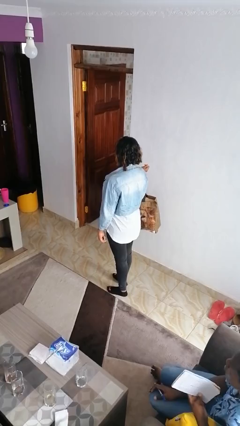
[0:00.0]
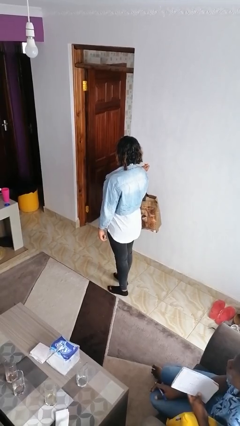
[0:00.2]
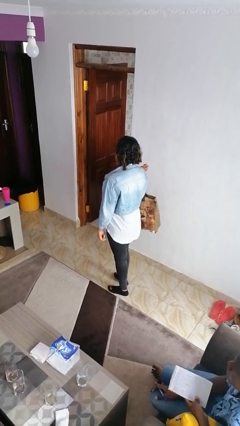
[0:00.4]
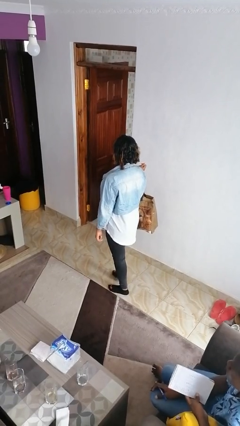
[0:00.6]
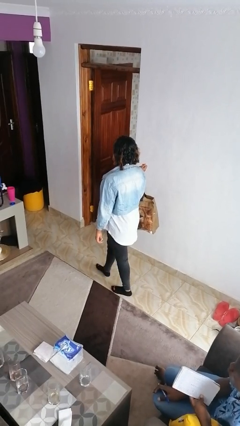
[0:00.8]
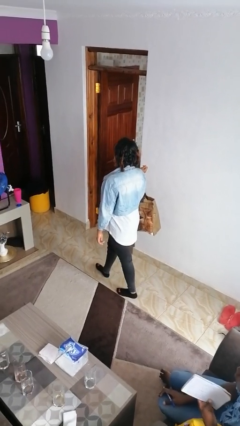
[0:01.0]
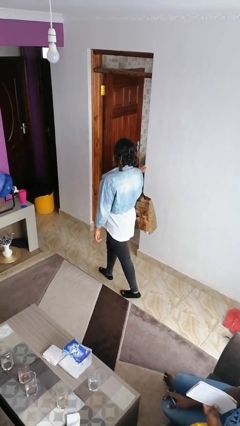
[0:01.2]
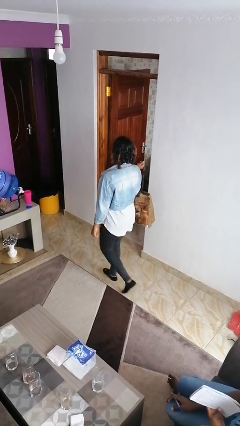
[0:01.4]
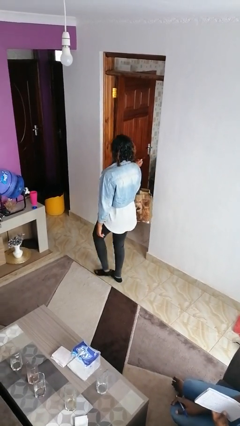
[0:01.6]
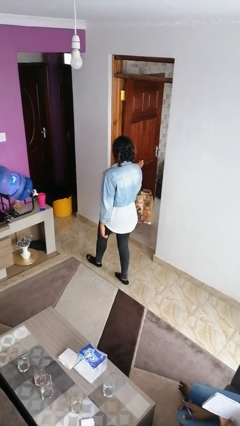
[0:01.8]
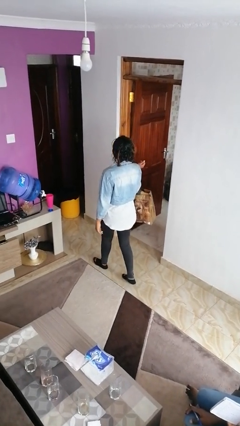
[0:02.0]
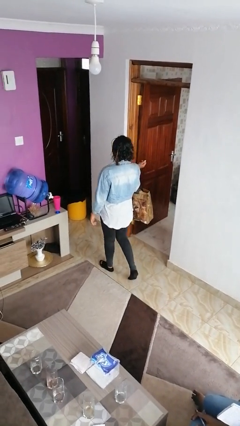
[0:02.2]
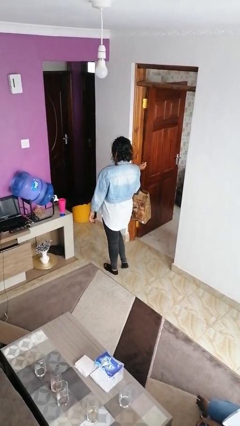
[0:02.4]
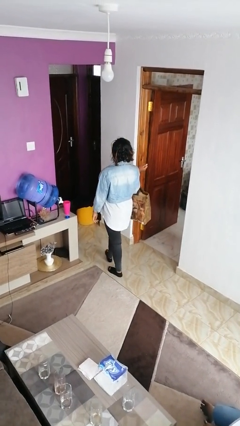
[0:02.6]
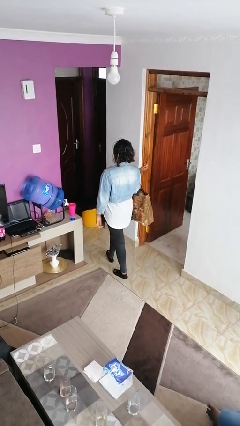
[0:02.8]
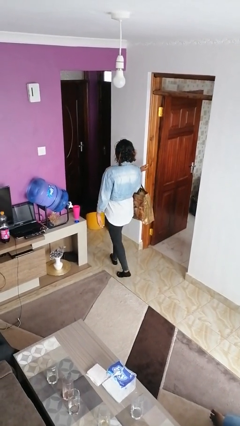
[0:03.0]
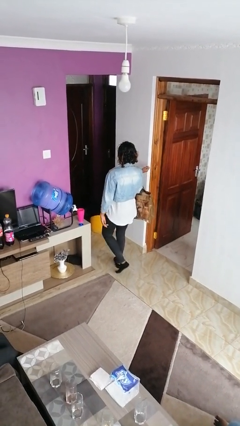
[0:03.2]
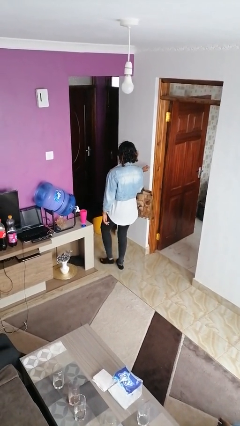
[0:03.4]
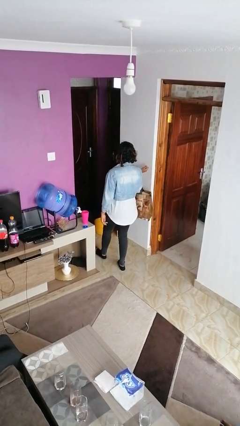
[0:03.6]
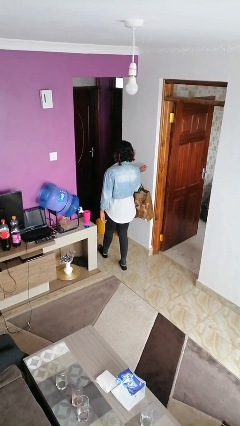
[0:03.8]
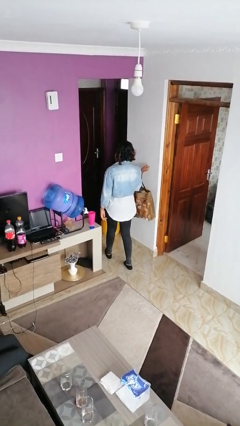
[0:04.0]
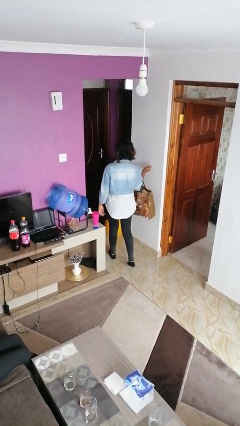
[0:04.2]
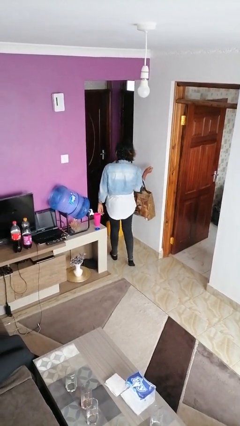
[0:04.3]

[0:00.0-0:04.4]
person carries groceries

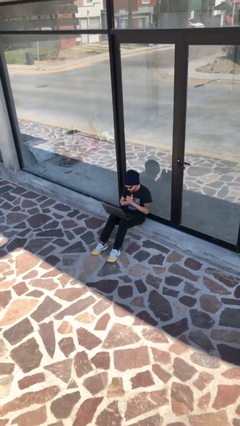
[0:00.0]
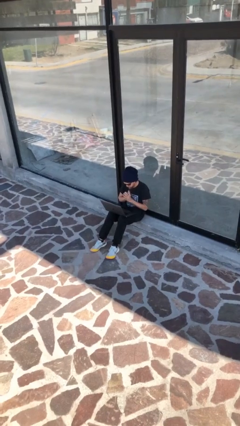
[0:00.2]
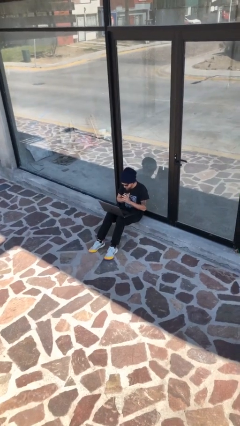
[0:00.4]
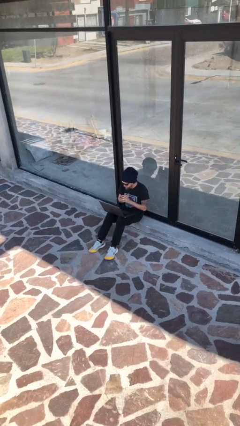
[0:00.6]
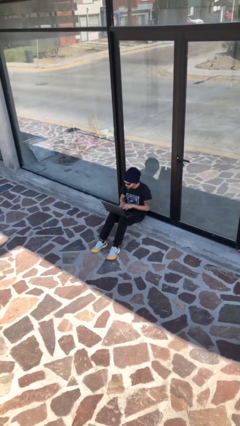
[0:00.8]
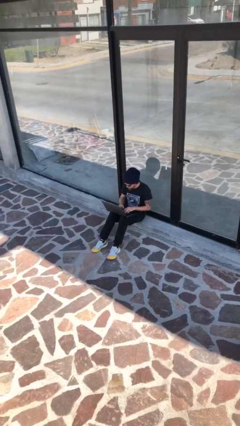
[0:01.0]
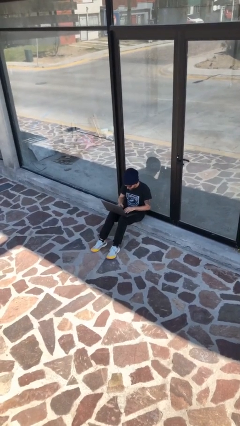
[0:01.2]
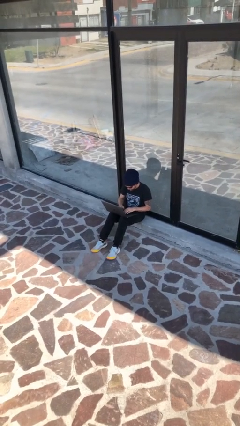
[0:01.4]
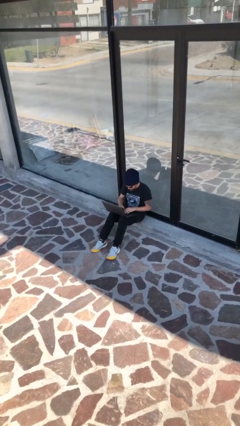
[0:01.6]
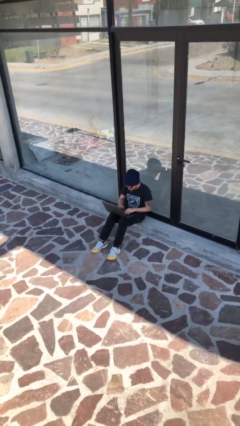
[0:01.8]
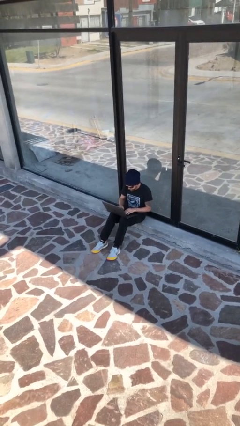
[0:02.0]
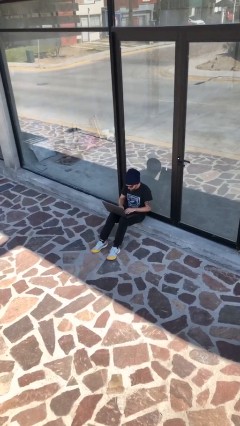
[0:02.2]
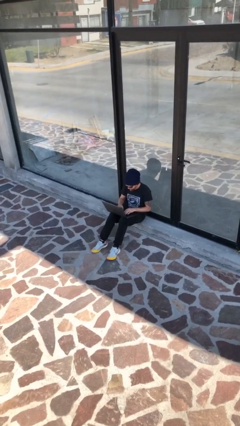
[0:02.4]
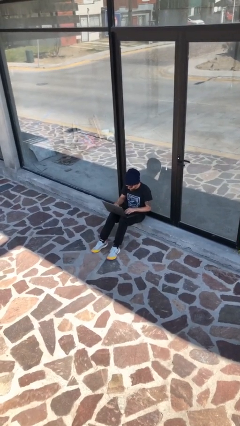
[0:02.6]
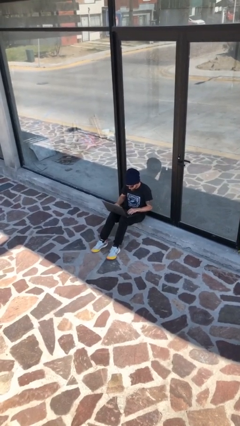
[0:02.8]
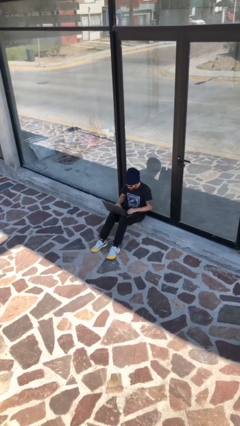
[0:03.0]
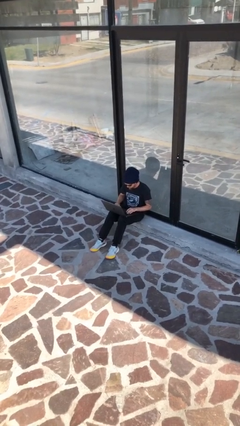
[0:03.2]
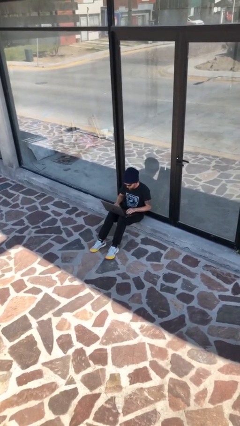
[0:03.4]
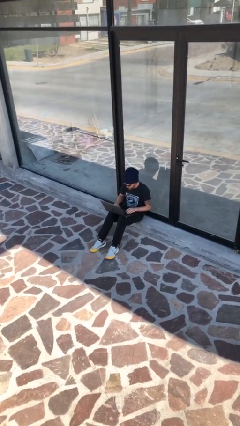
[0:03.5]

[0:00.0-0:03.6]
person interacts with laptop

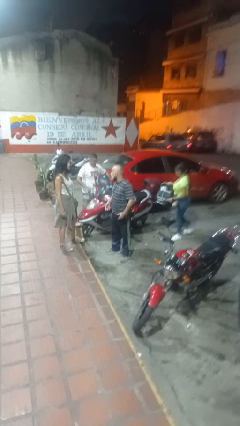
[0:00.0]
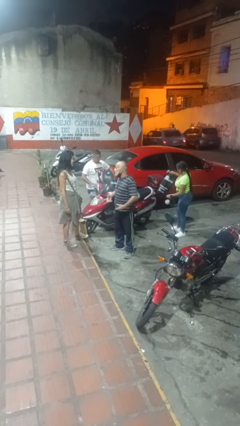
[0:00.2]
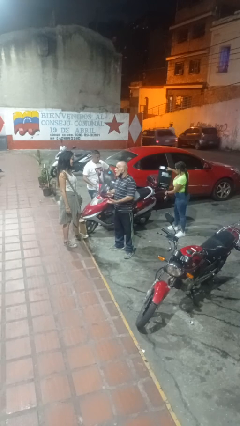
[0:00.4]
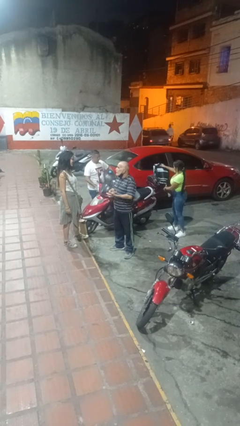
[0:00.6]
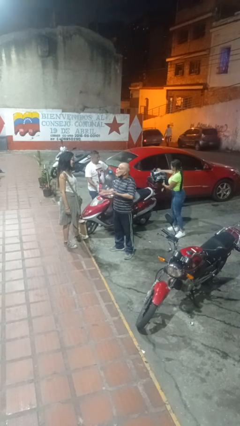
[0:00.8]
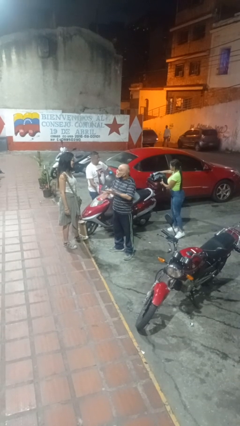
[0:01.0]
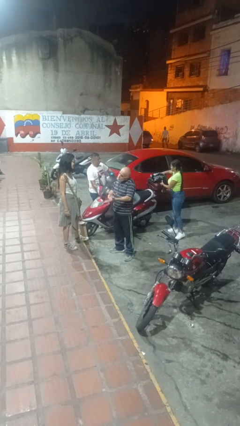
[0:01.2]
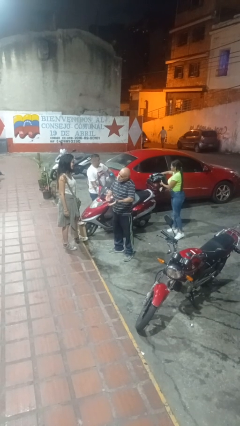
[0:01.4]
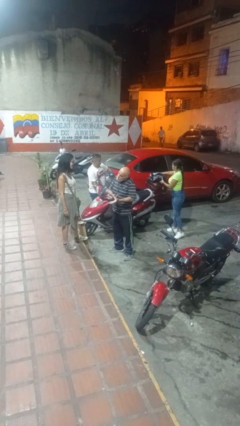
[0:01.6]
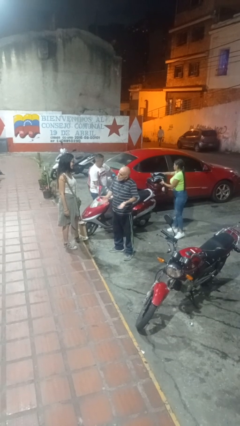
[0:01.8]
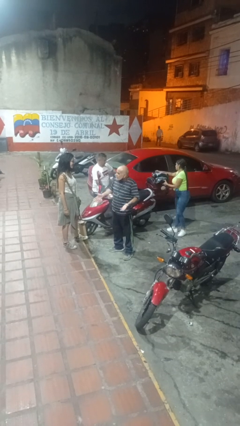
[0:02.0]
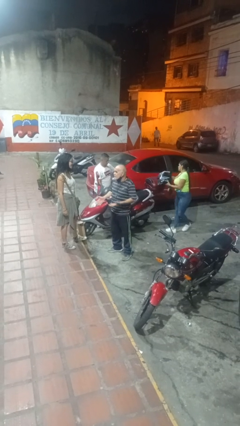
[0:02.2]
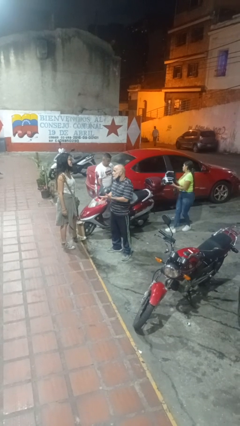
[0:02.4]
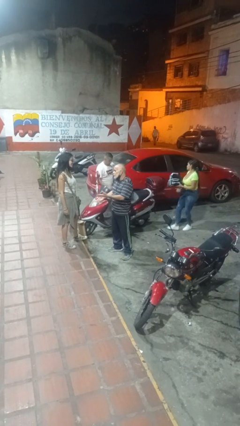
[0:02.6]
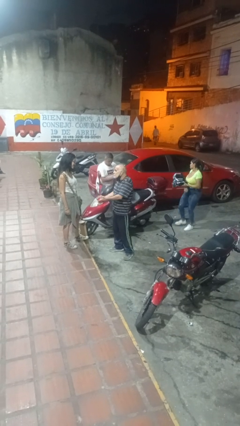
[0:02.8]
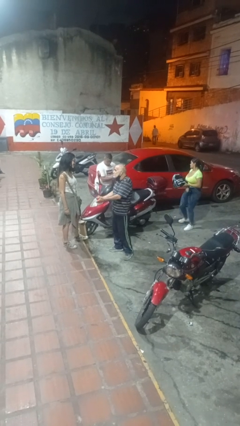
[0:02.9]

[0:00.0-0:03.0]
person talks to person

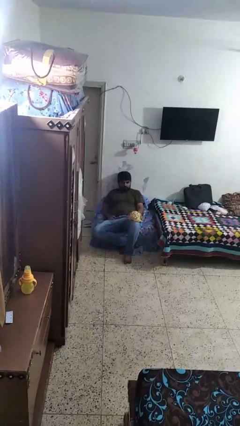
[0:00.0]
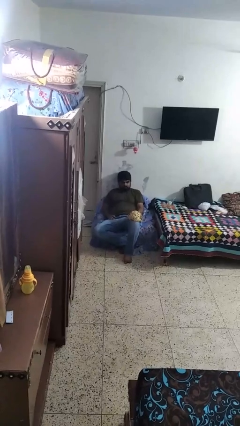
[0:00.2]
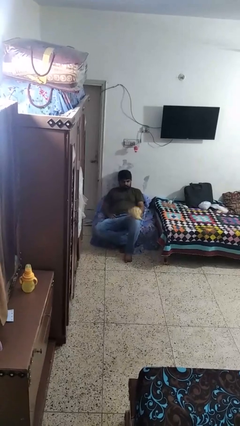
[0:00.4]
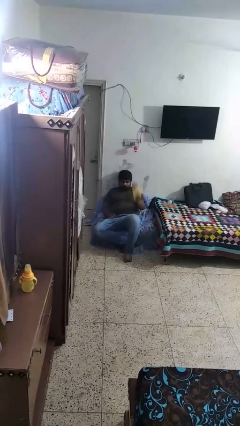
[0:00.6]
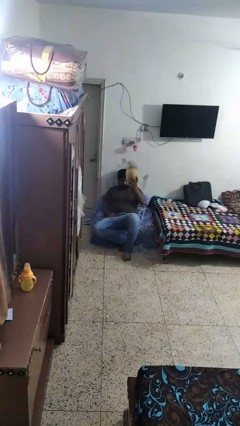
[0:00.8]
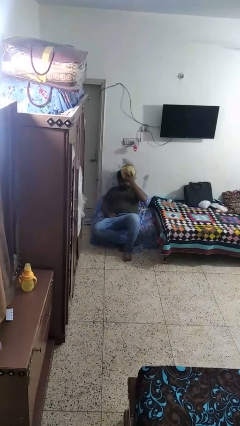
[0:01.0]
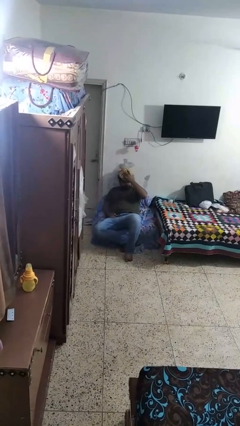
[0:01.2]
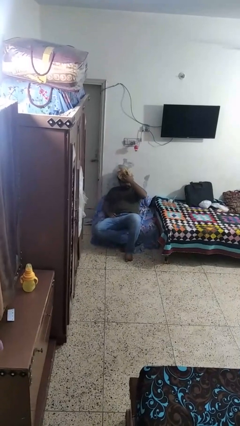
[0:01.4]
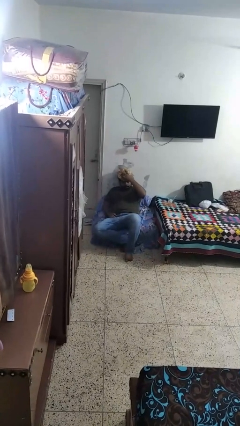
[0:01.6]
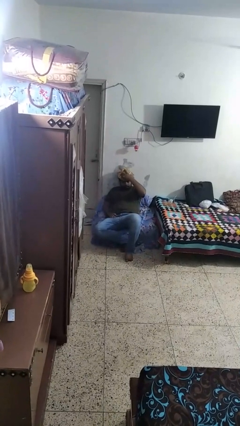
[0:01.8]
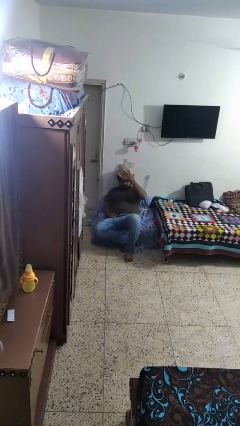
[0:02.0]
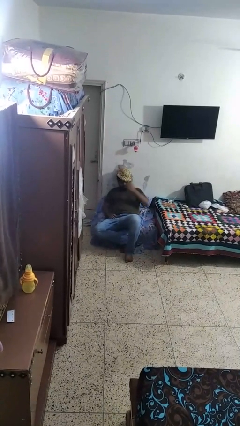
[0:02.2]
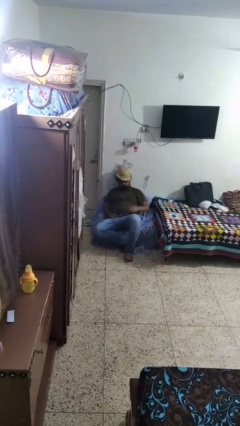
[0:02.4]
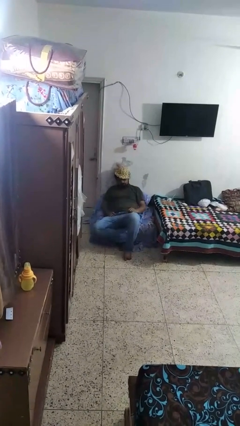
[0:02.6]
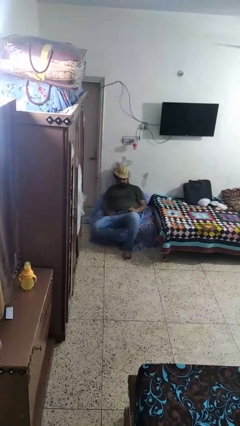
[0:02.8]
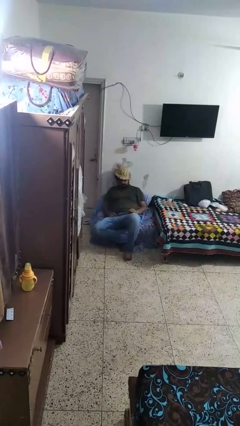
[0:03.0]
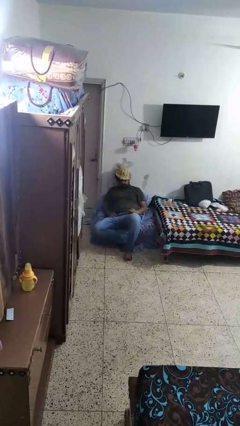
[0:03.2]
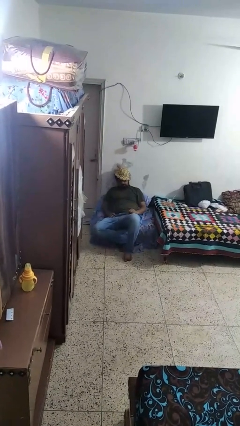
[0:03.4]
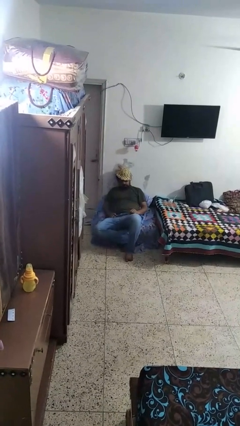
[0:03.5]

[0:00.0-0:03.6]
person puts on hat

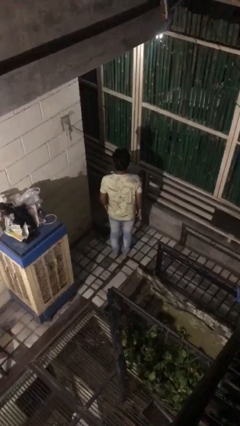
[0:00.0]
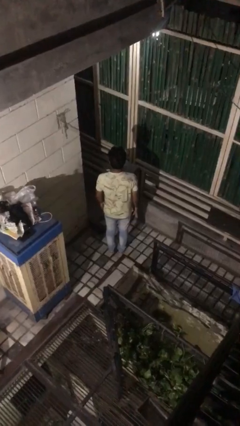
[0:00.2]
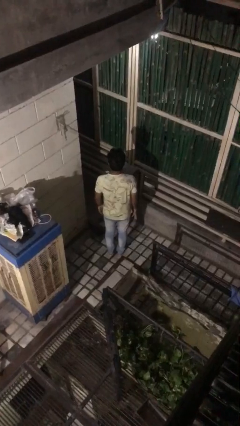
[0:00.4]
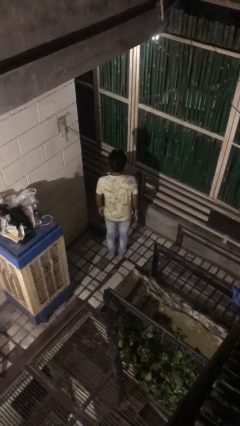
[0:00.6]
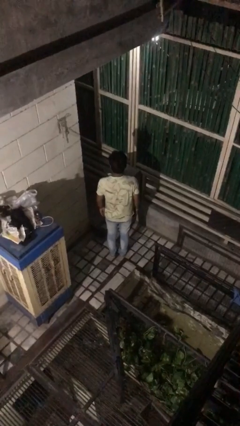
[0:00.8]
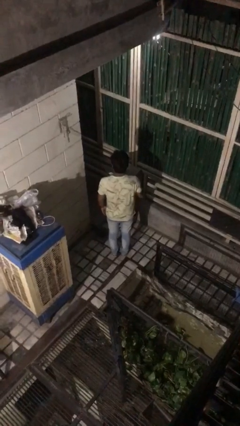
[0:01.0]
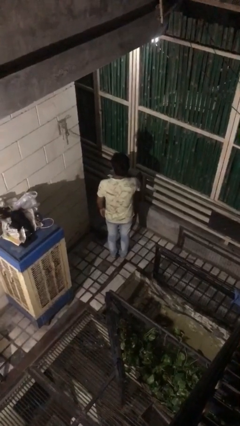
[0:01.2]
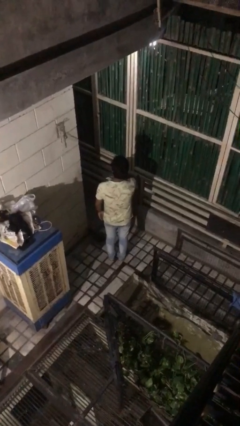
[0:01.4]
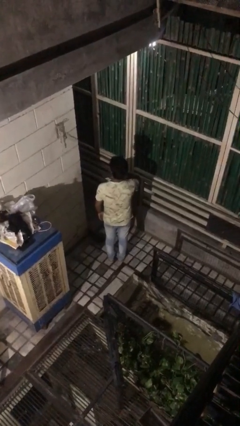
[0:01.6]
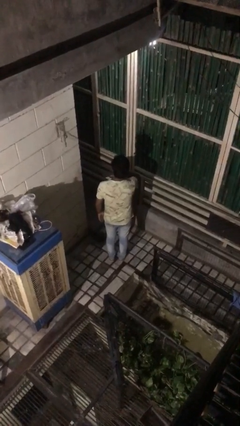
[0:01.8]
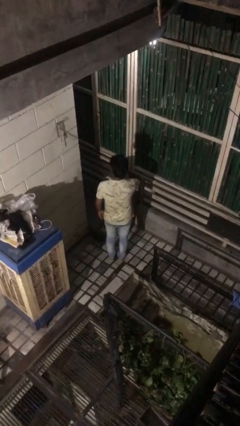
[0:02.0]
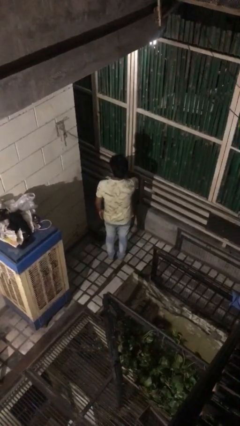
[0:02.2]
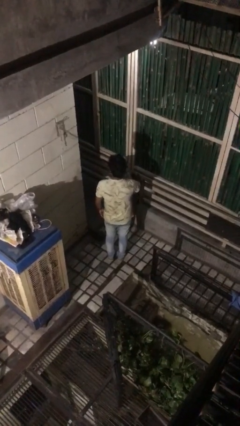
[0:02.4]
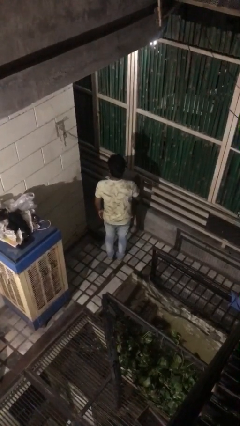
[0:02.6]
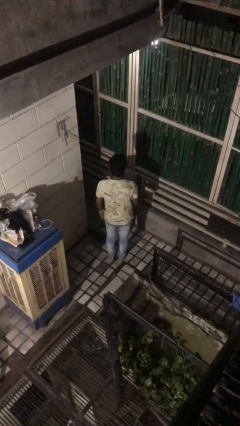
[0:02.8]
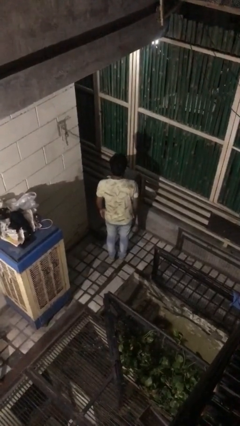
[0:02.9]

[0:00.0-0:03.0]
person gestures cut
